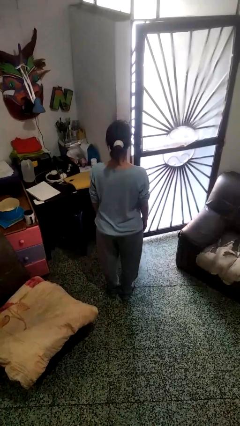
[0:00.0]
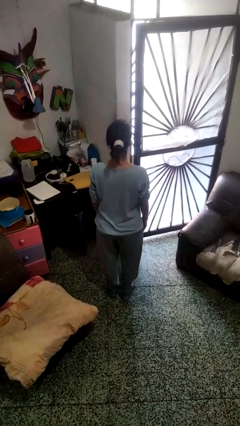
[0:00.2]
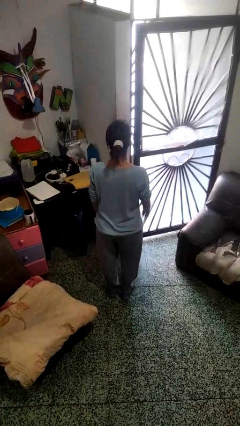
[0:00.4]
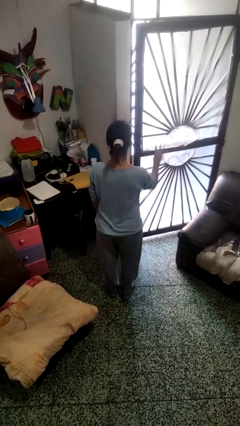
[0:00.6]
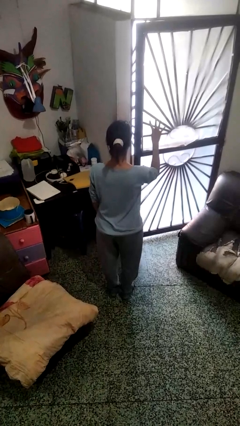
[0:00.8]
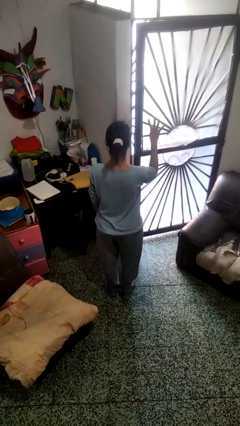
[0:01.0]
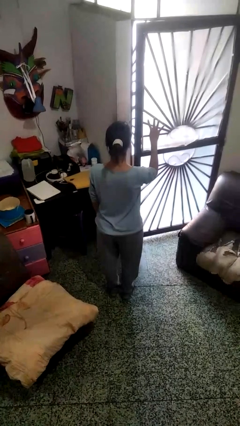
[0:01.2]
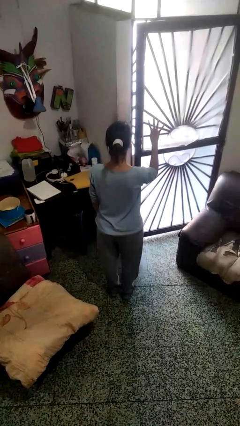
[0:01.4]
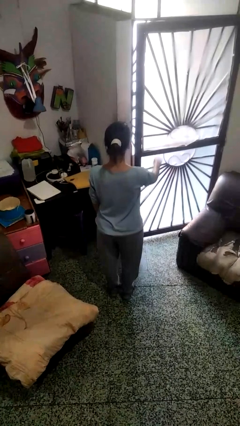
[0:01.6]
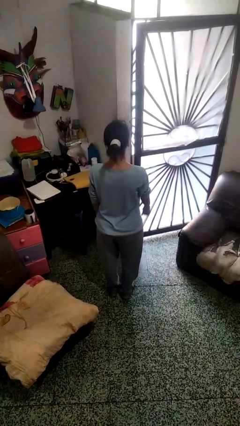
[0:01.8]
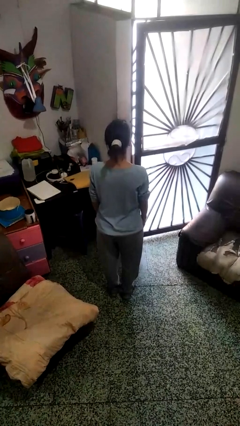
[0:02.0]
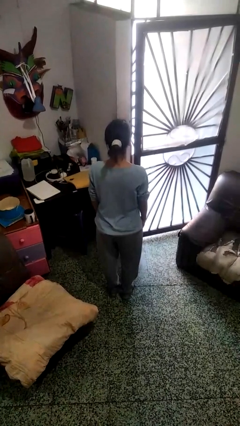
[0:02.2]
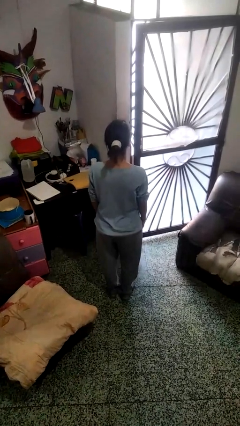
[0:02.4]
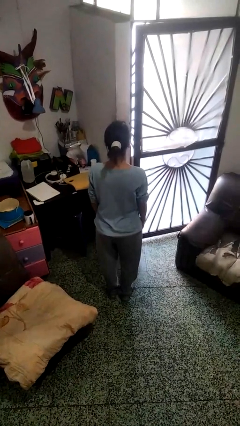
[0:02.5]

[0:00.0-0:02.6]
person gestures number four

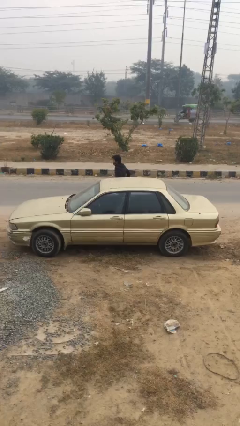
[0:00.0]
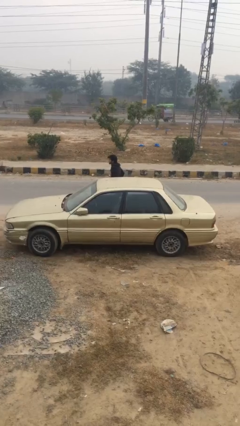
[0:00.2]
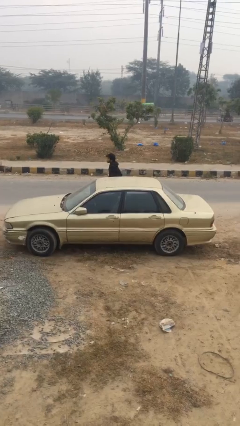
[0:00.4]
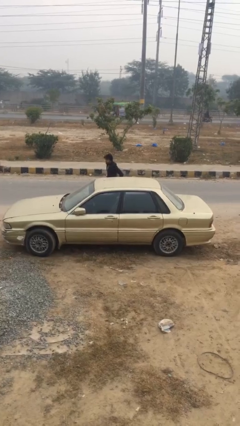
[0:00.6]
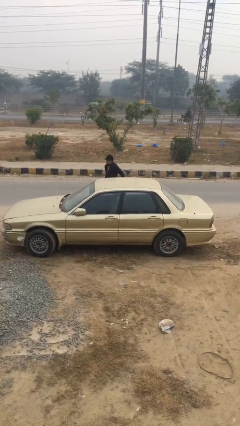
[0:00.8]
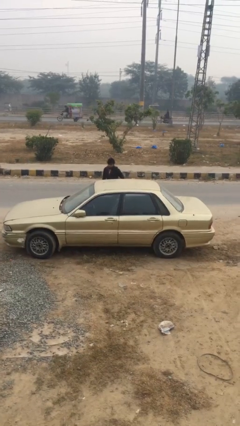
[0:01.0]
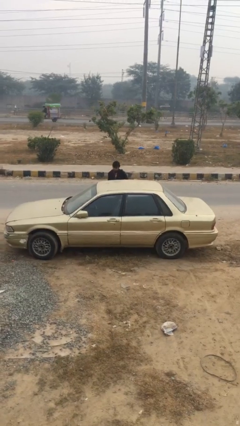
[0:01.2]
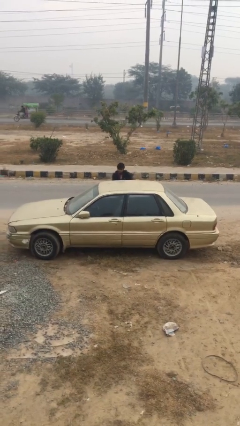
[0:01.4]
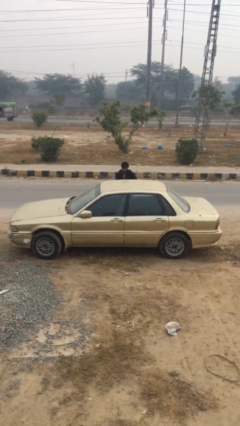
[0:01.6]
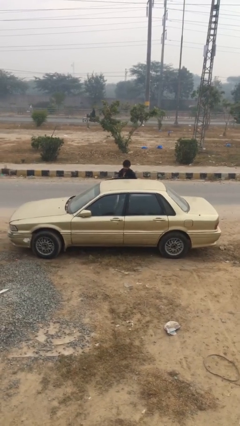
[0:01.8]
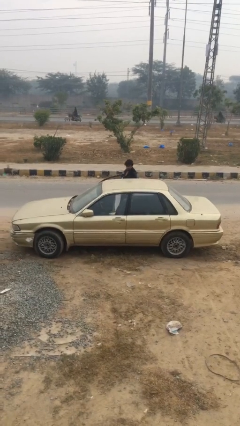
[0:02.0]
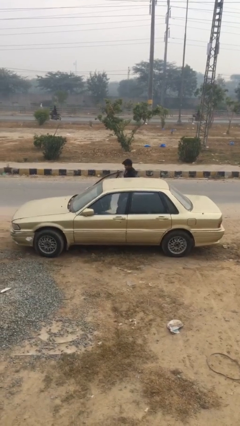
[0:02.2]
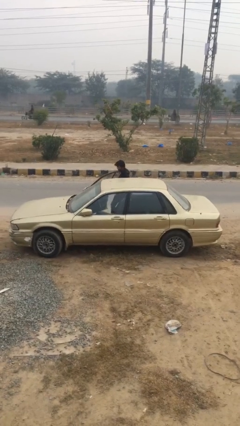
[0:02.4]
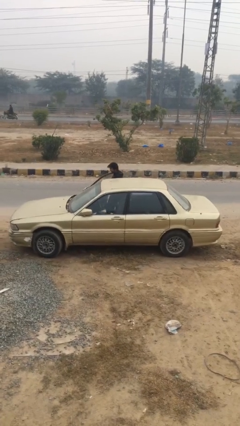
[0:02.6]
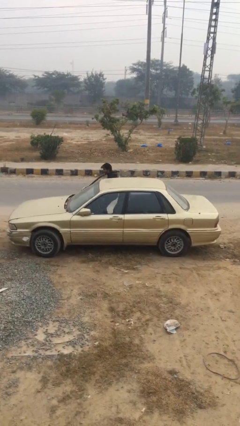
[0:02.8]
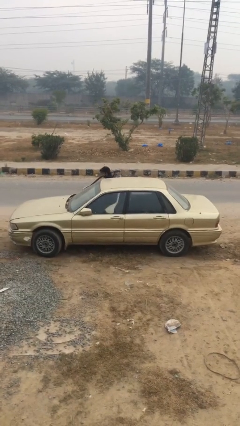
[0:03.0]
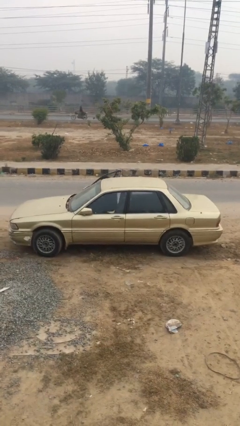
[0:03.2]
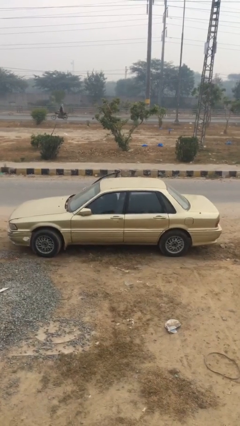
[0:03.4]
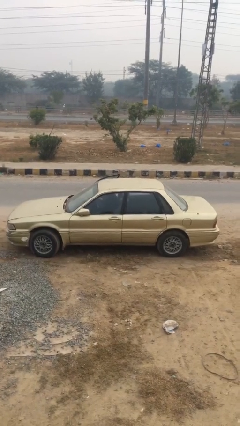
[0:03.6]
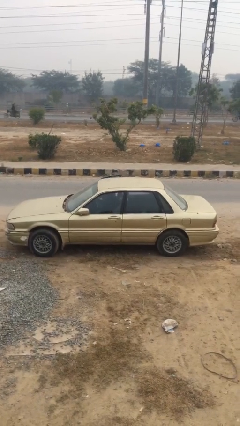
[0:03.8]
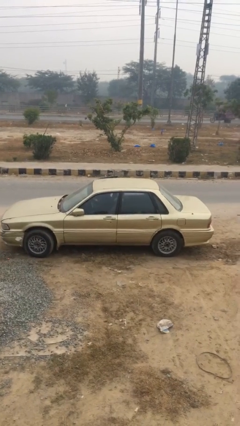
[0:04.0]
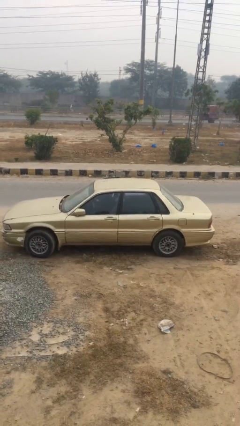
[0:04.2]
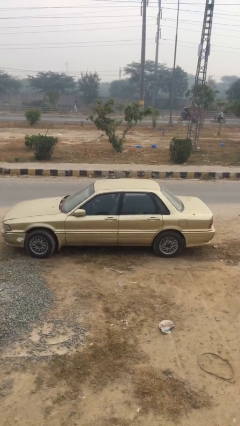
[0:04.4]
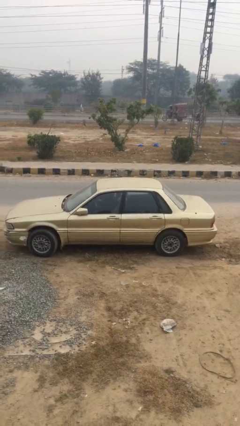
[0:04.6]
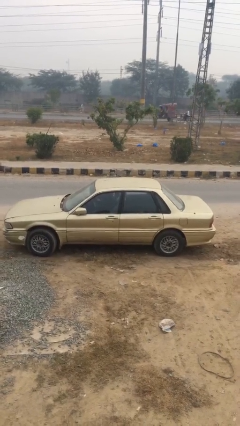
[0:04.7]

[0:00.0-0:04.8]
car picks up person

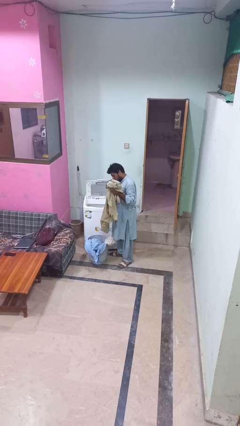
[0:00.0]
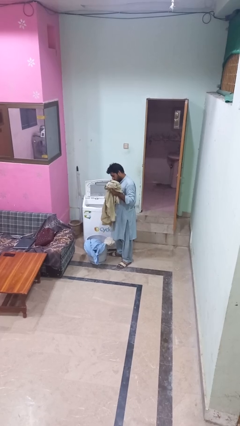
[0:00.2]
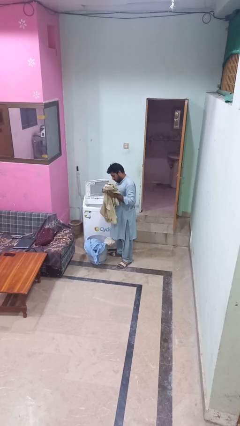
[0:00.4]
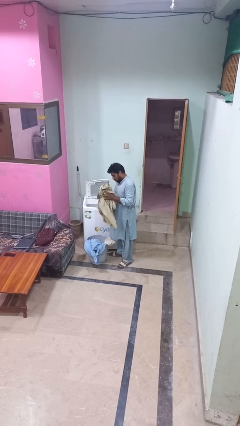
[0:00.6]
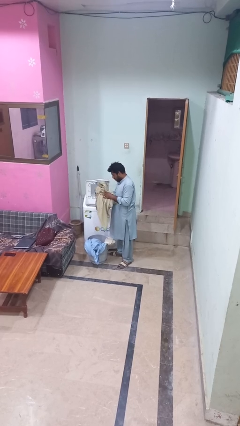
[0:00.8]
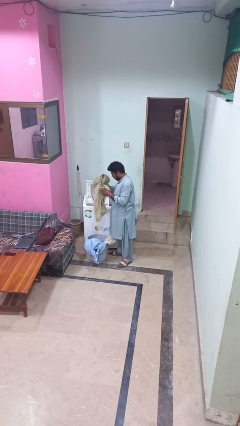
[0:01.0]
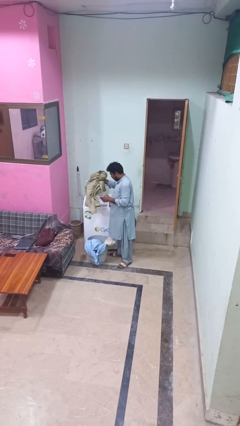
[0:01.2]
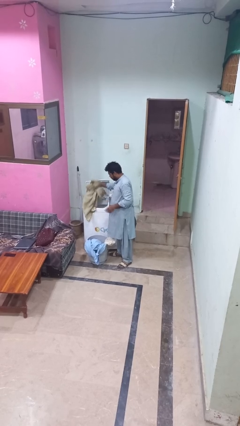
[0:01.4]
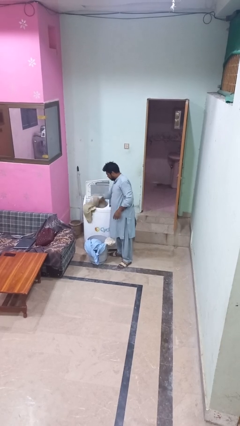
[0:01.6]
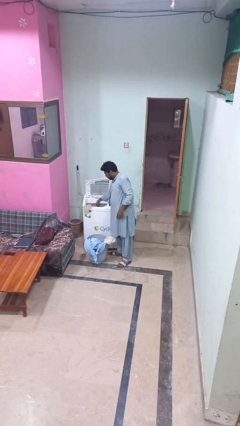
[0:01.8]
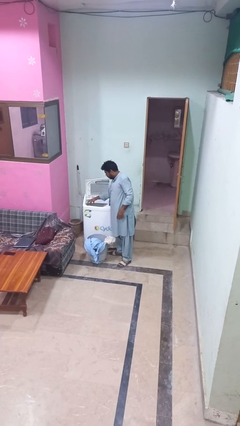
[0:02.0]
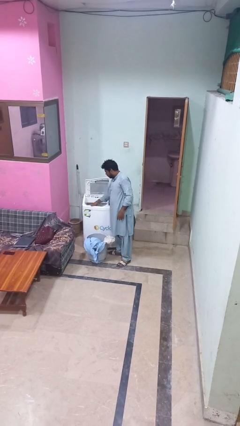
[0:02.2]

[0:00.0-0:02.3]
person loads clotheswasher

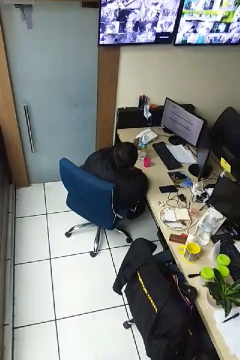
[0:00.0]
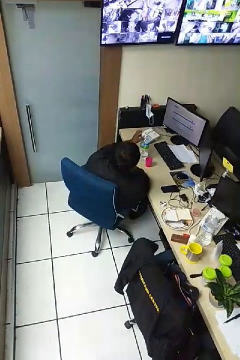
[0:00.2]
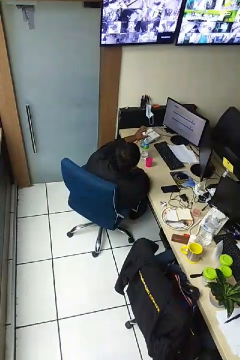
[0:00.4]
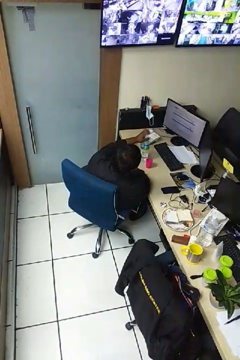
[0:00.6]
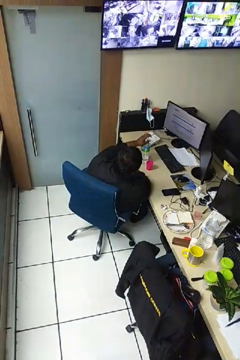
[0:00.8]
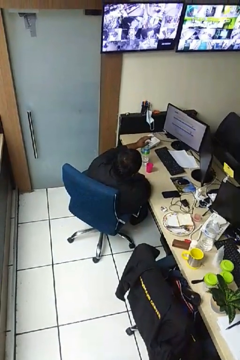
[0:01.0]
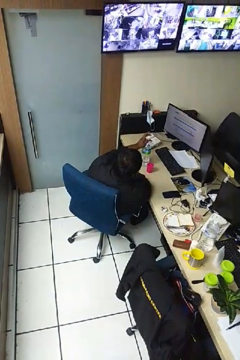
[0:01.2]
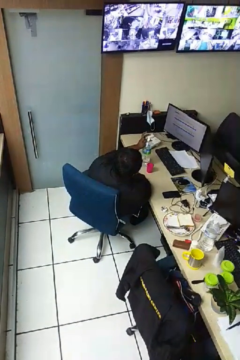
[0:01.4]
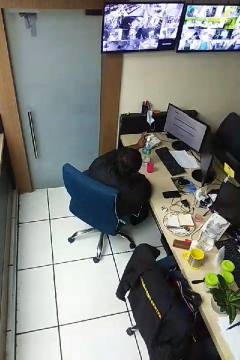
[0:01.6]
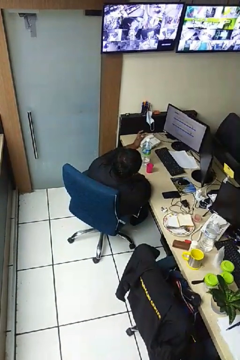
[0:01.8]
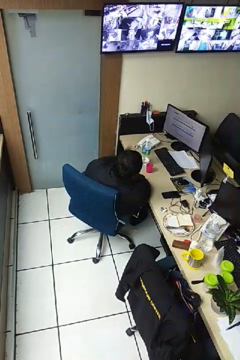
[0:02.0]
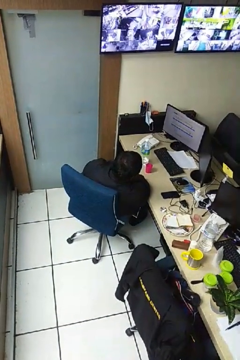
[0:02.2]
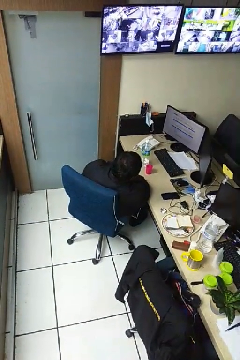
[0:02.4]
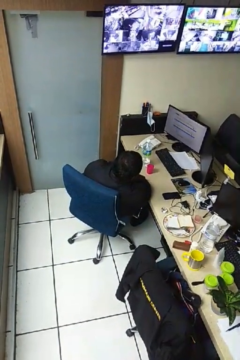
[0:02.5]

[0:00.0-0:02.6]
person screws lid to bottle

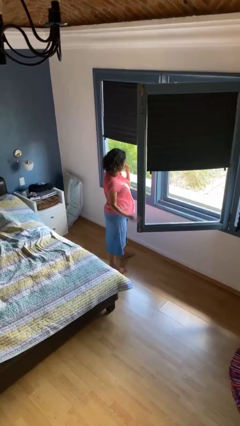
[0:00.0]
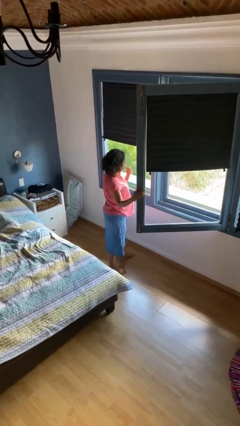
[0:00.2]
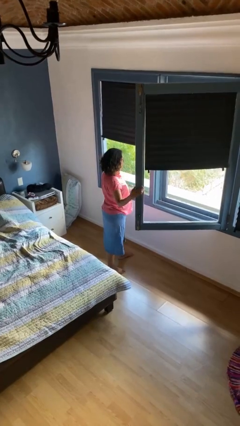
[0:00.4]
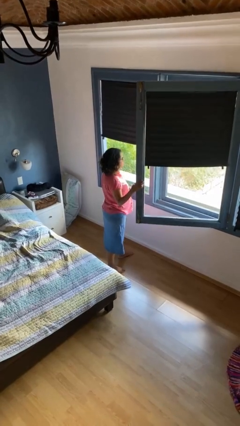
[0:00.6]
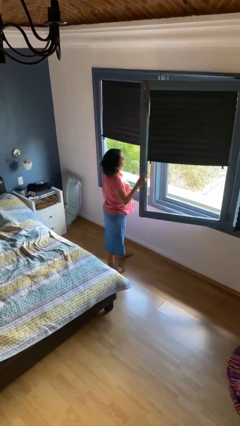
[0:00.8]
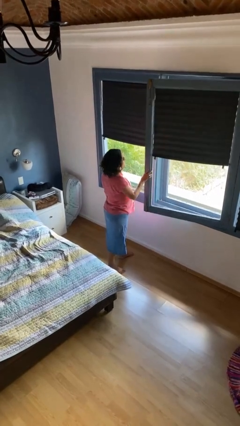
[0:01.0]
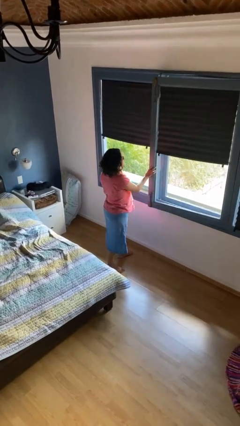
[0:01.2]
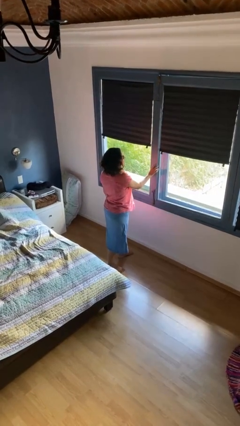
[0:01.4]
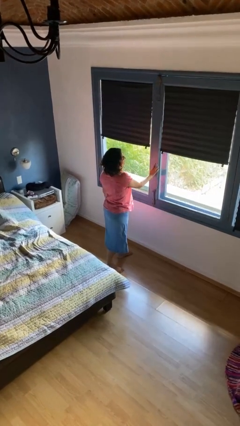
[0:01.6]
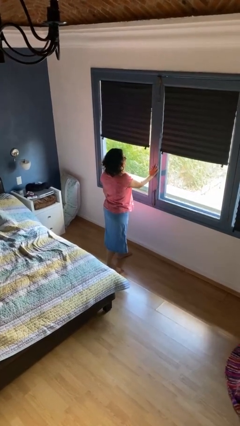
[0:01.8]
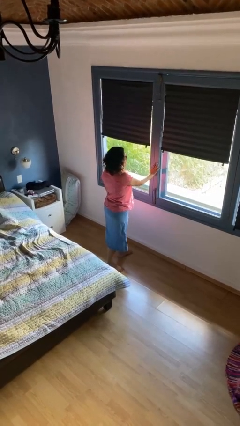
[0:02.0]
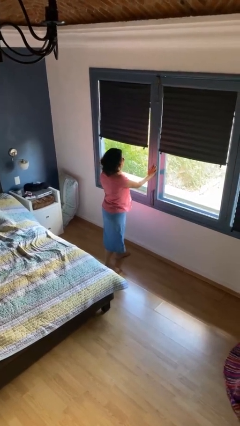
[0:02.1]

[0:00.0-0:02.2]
person closes home window

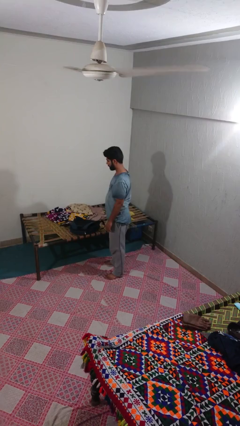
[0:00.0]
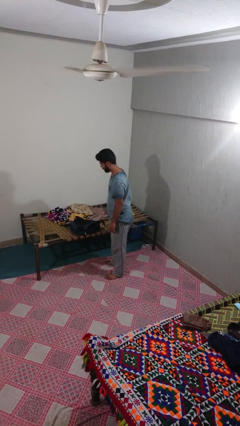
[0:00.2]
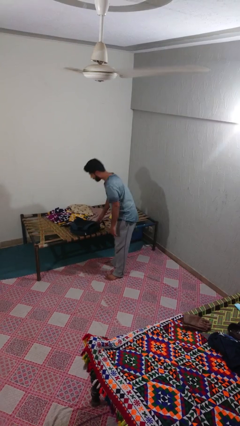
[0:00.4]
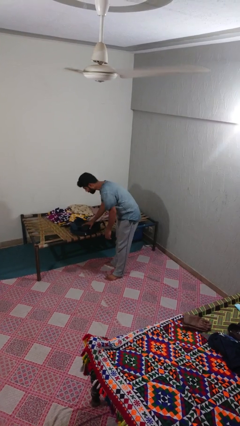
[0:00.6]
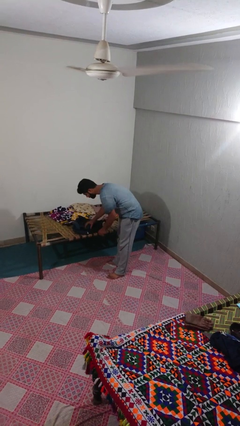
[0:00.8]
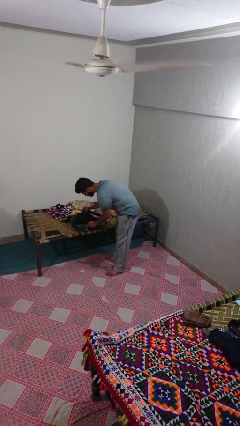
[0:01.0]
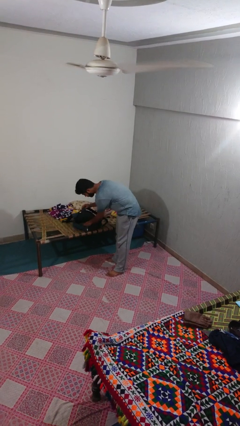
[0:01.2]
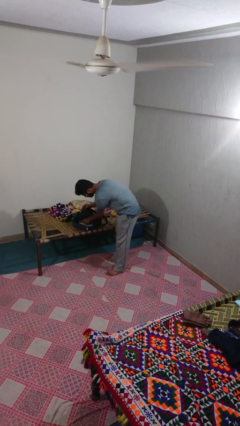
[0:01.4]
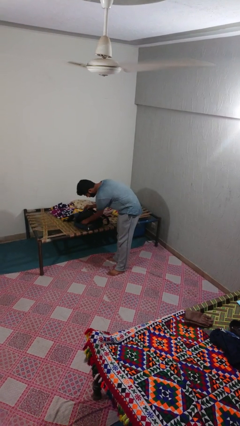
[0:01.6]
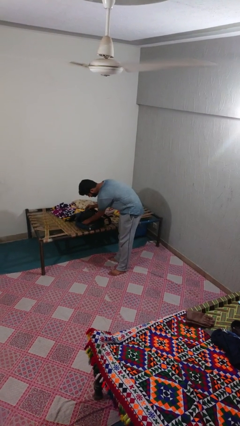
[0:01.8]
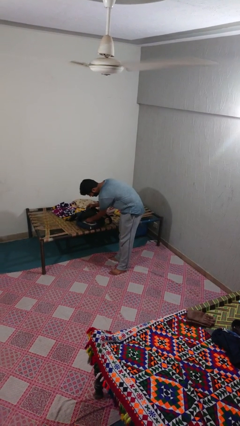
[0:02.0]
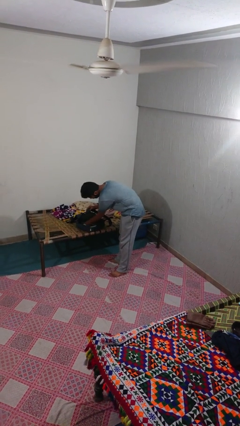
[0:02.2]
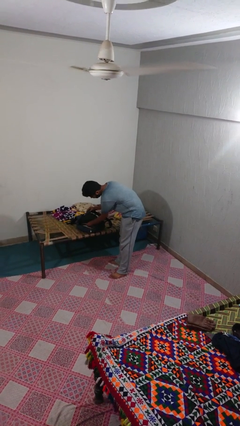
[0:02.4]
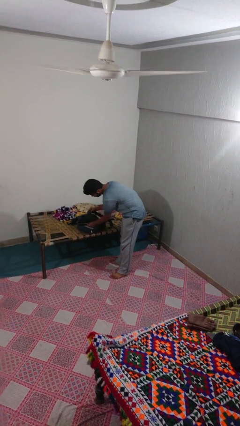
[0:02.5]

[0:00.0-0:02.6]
person searches in backpack

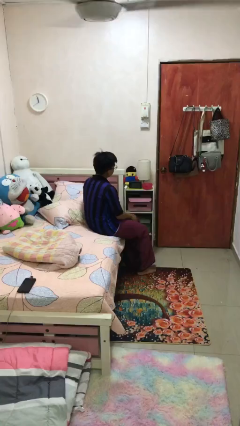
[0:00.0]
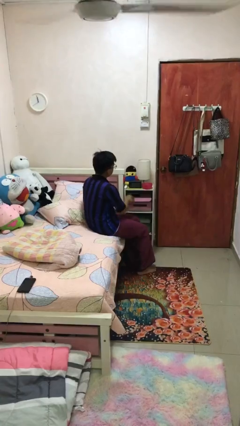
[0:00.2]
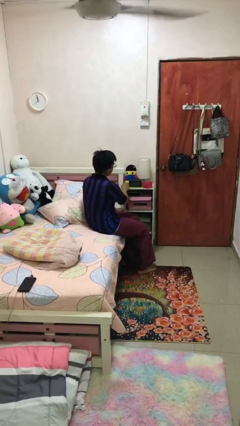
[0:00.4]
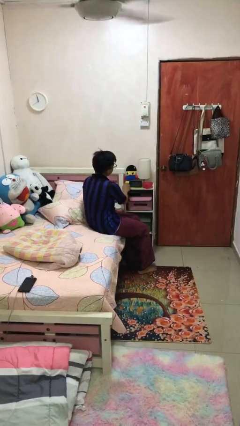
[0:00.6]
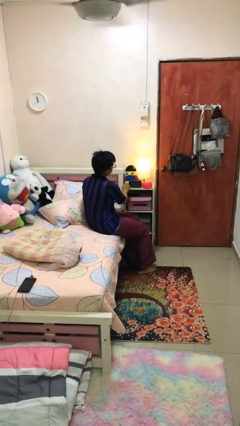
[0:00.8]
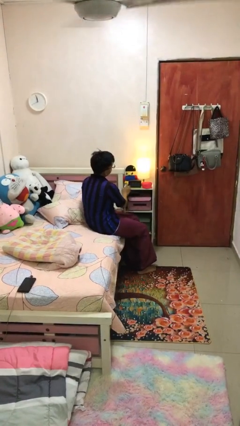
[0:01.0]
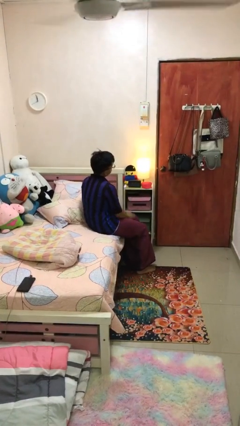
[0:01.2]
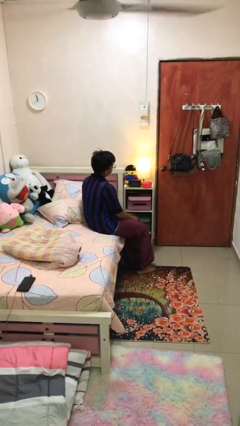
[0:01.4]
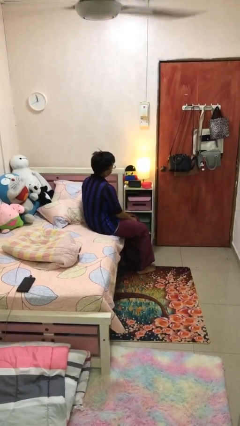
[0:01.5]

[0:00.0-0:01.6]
person turns on lamp
